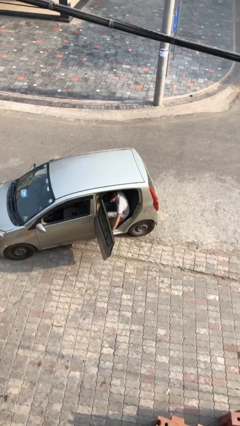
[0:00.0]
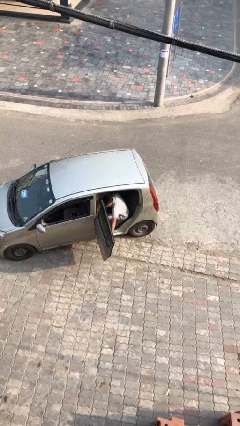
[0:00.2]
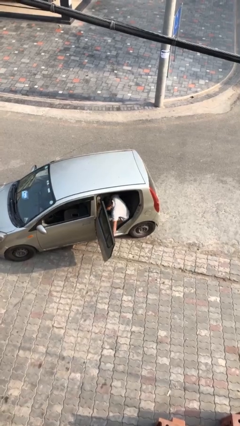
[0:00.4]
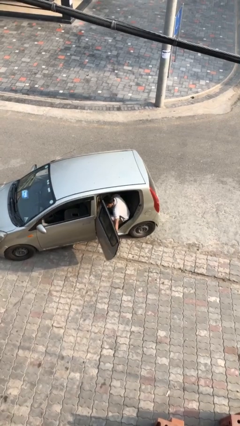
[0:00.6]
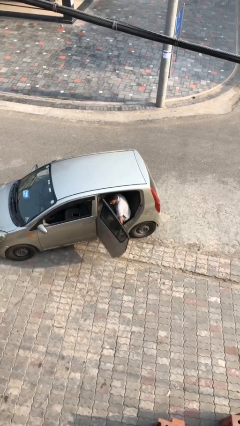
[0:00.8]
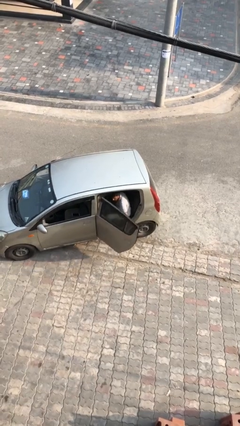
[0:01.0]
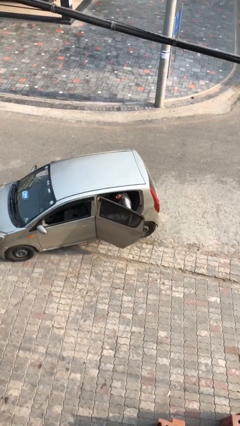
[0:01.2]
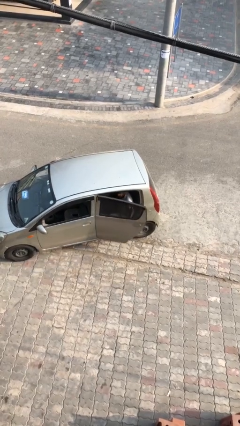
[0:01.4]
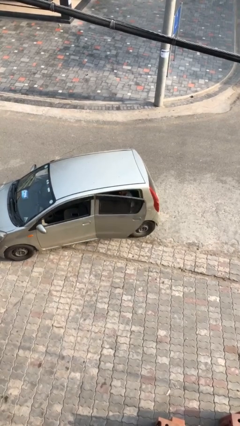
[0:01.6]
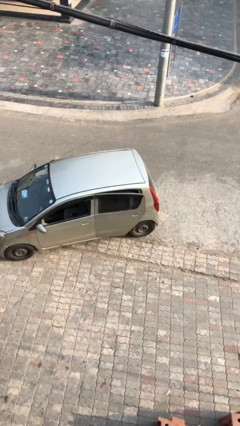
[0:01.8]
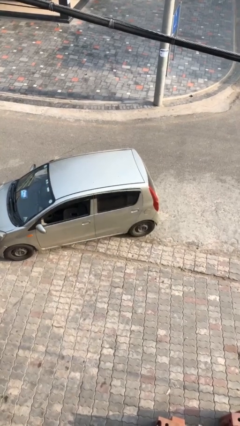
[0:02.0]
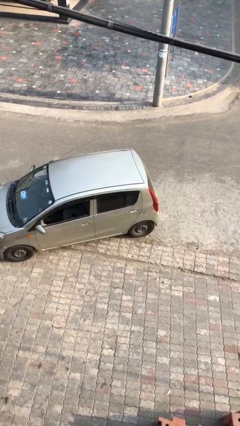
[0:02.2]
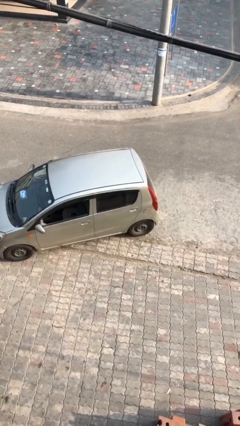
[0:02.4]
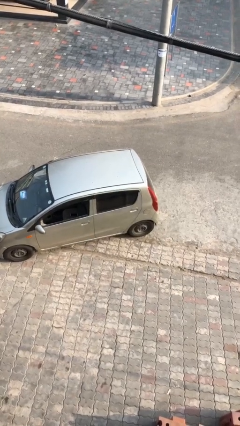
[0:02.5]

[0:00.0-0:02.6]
person closes car door

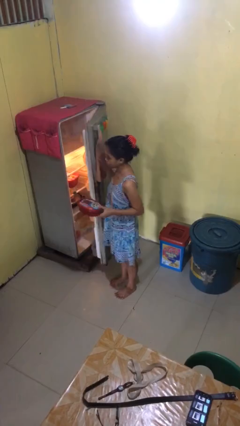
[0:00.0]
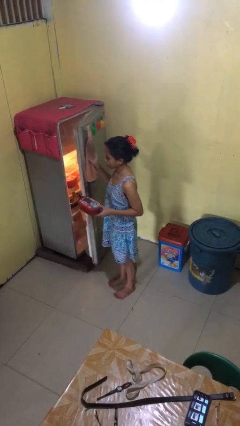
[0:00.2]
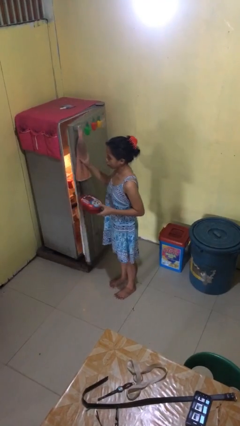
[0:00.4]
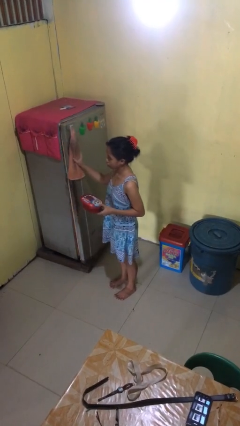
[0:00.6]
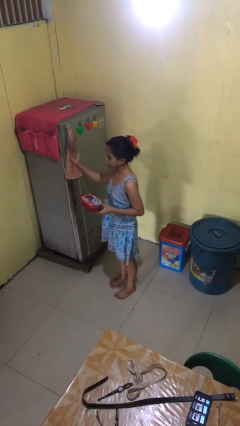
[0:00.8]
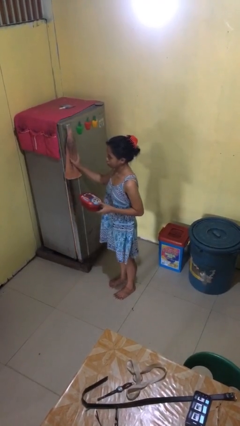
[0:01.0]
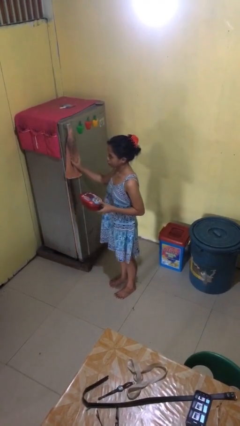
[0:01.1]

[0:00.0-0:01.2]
person closes refrigerator

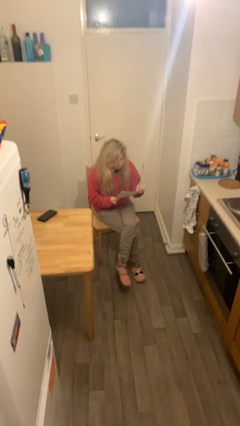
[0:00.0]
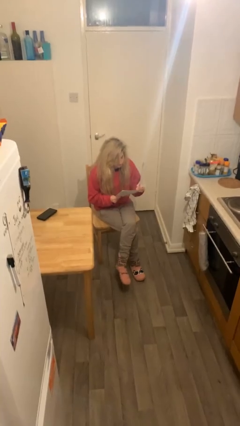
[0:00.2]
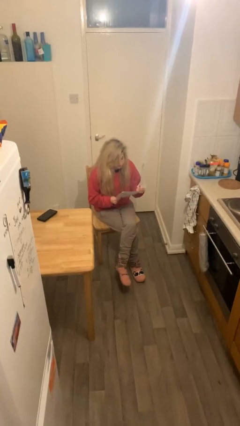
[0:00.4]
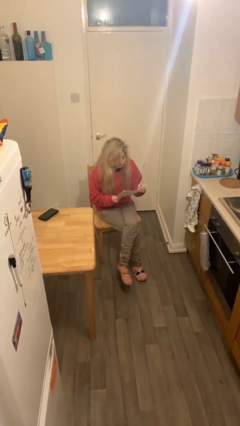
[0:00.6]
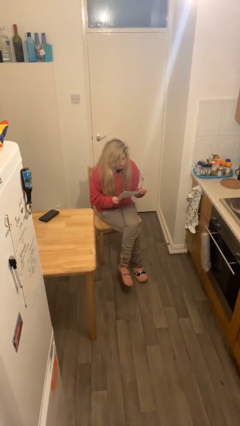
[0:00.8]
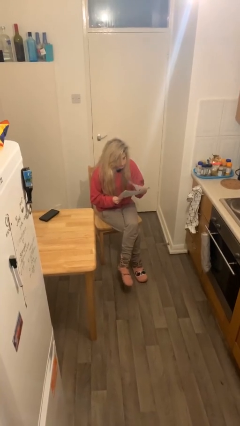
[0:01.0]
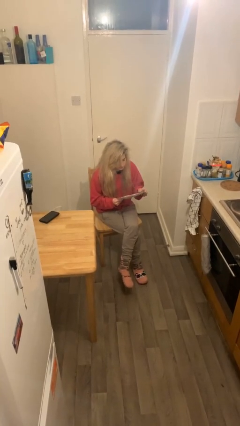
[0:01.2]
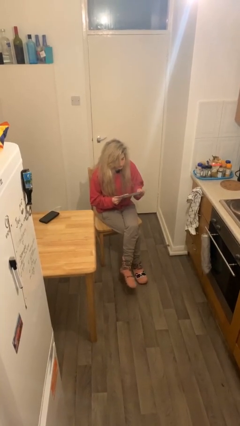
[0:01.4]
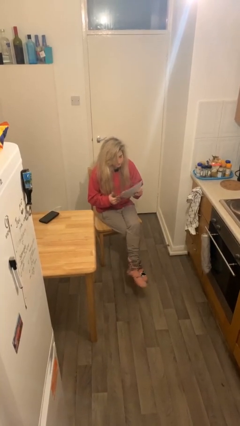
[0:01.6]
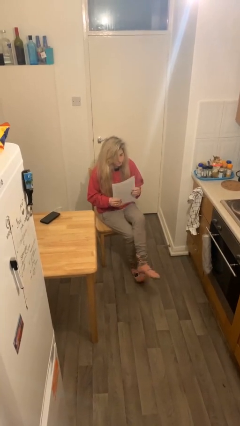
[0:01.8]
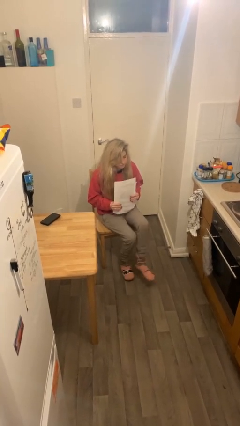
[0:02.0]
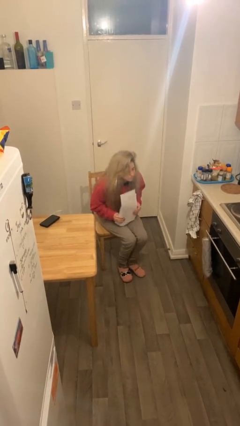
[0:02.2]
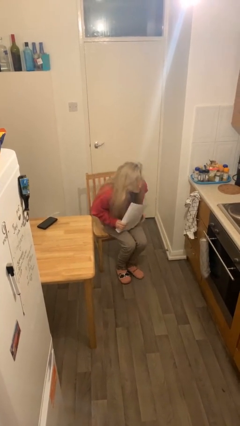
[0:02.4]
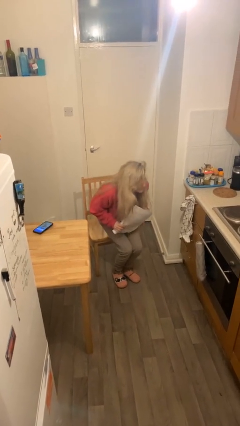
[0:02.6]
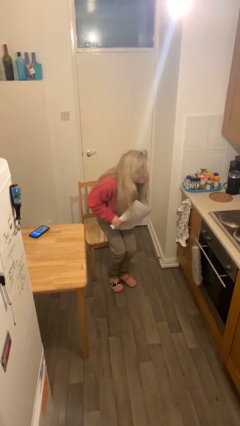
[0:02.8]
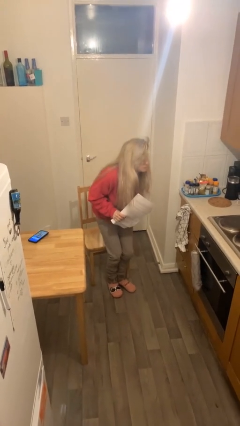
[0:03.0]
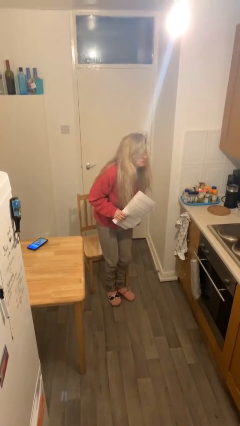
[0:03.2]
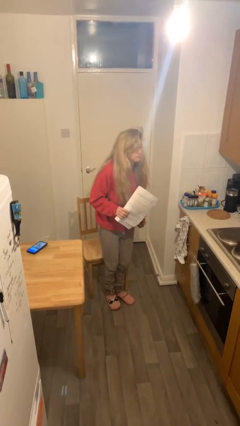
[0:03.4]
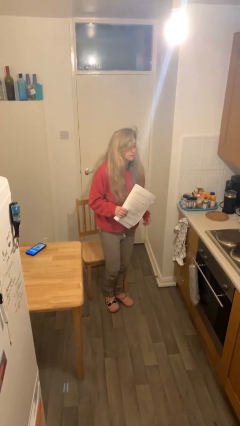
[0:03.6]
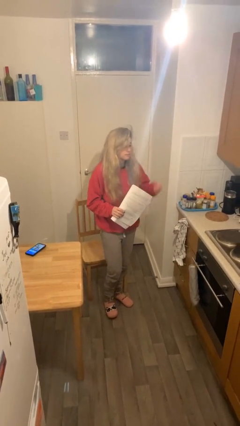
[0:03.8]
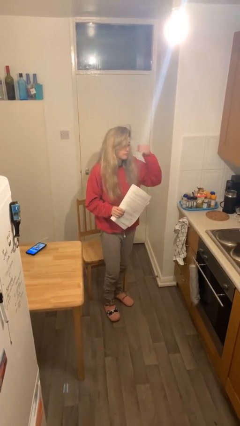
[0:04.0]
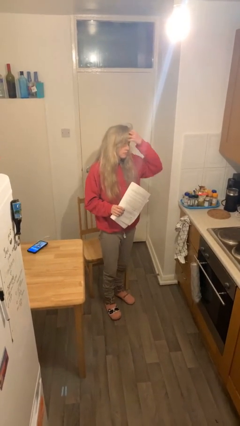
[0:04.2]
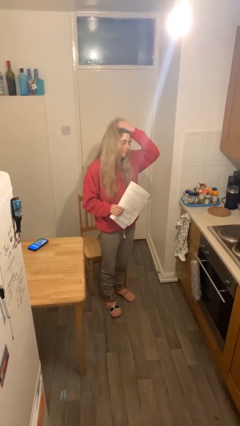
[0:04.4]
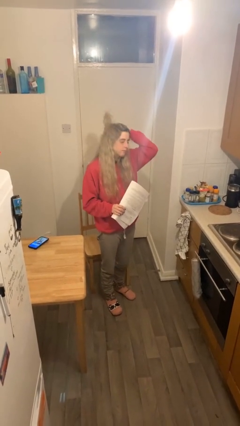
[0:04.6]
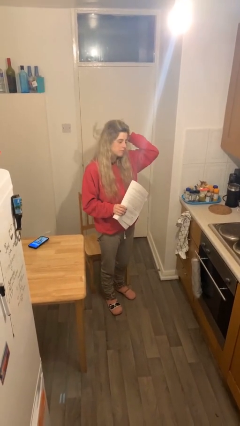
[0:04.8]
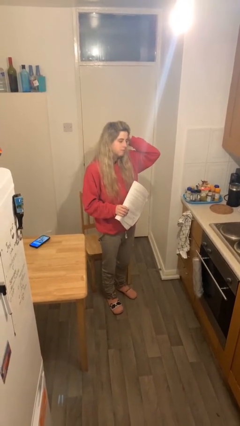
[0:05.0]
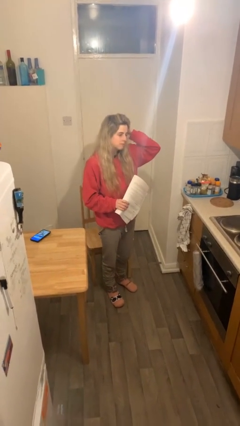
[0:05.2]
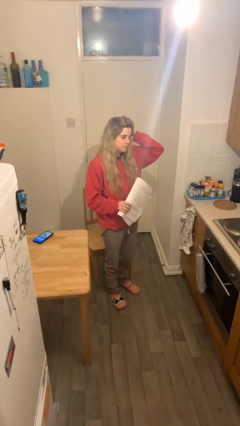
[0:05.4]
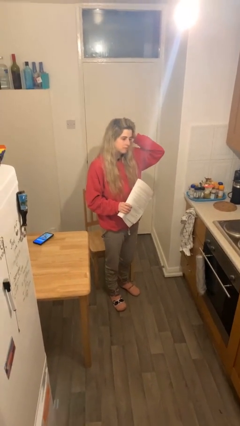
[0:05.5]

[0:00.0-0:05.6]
person stands up

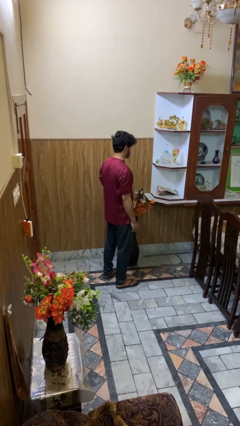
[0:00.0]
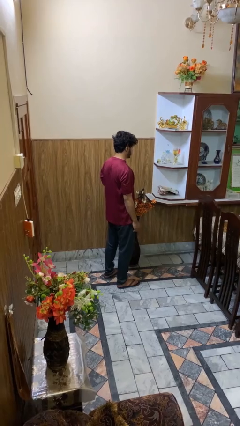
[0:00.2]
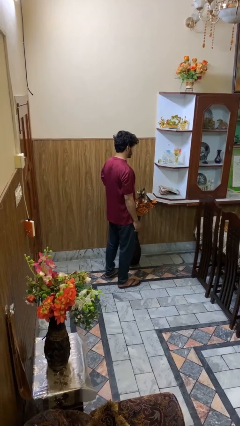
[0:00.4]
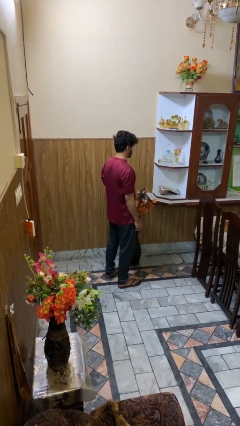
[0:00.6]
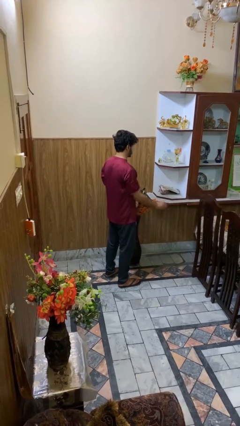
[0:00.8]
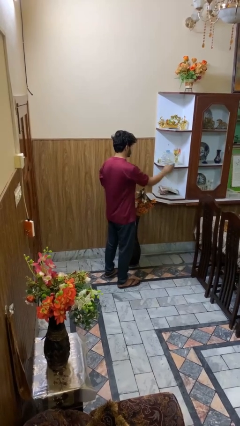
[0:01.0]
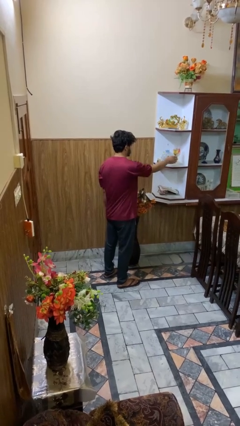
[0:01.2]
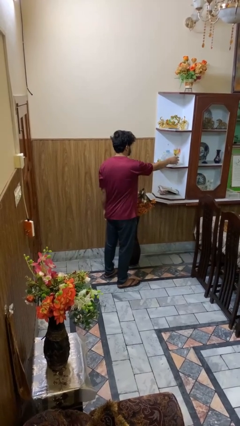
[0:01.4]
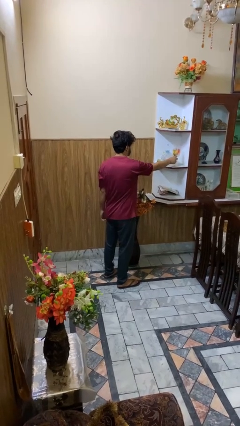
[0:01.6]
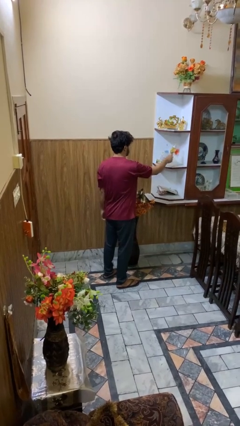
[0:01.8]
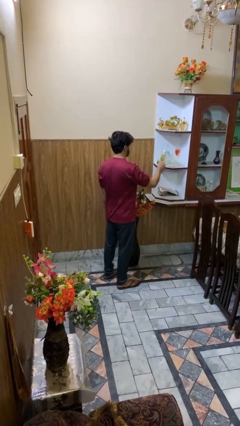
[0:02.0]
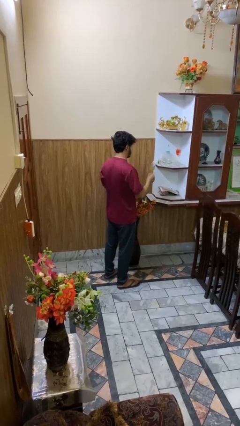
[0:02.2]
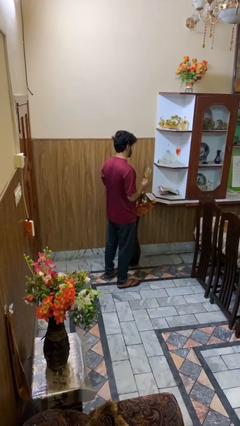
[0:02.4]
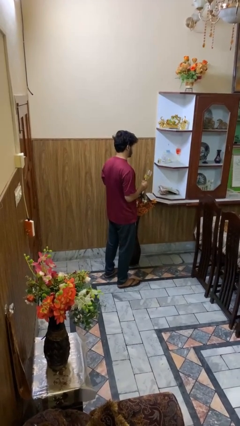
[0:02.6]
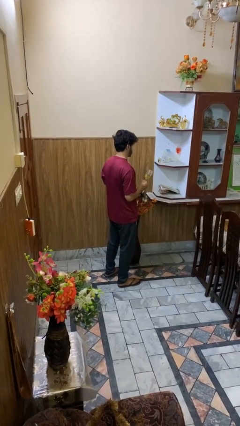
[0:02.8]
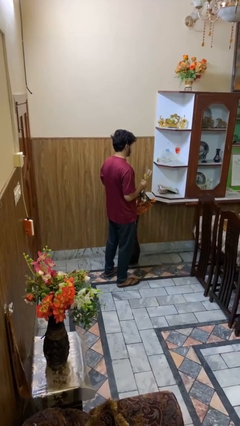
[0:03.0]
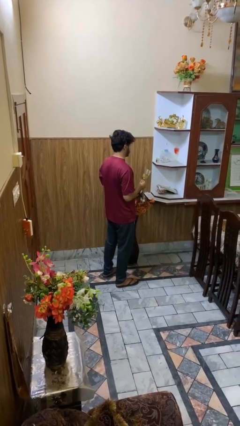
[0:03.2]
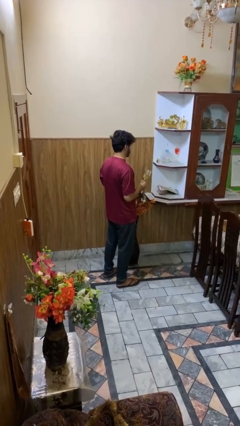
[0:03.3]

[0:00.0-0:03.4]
person picks up object from cabinet

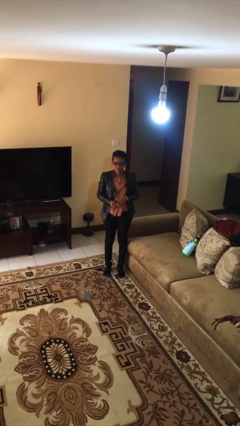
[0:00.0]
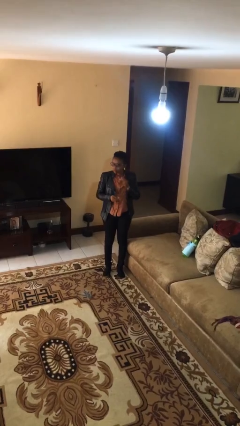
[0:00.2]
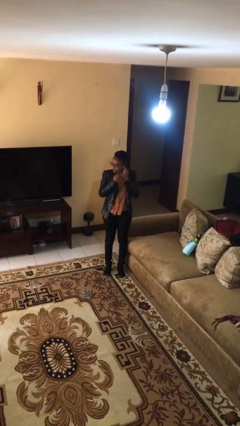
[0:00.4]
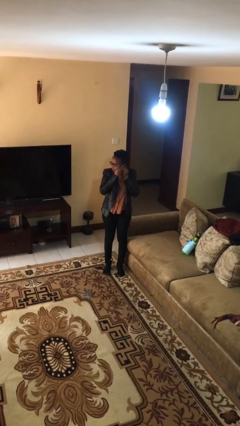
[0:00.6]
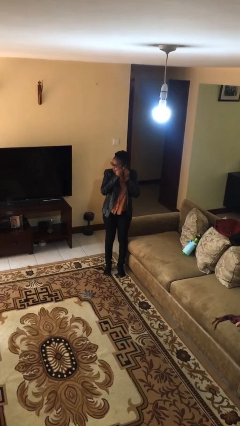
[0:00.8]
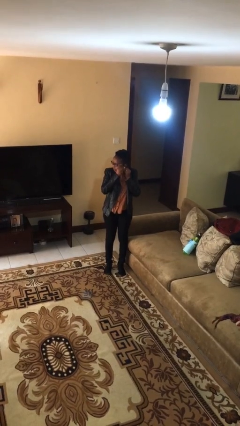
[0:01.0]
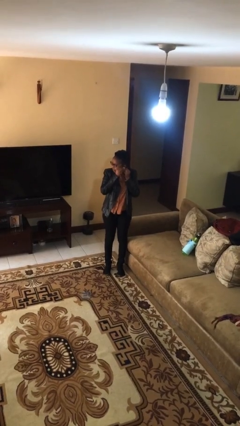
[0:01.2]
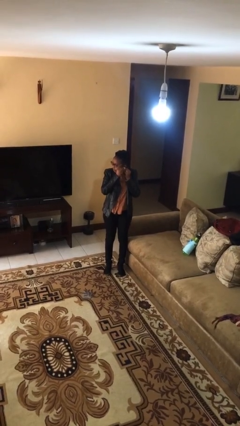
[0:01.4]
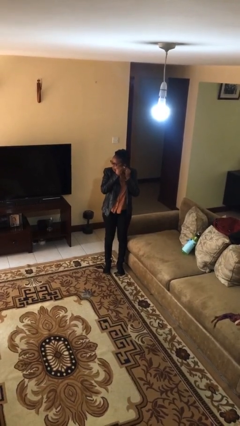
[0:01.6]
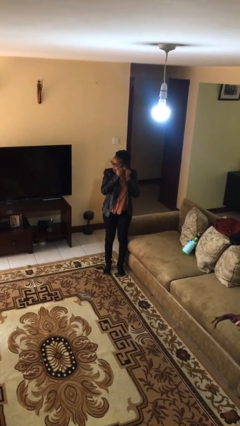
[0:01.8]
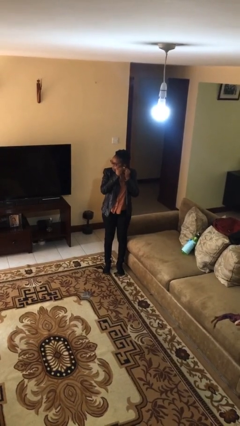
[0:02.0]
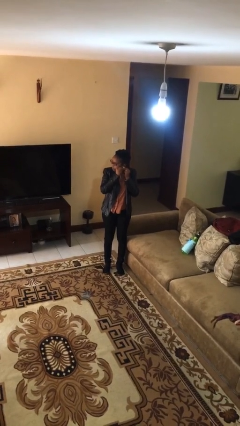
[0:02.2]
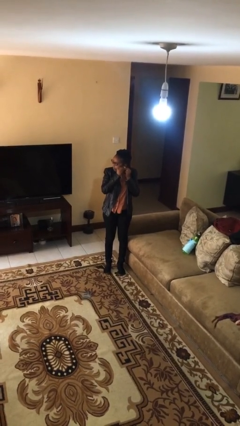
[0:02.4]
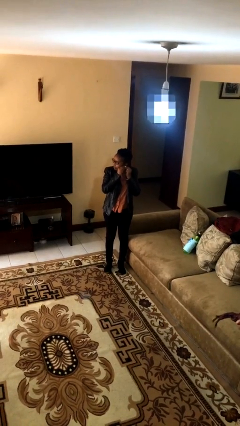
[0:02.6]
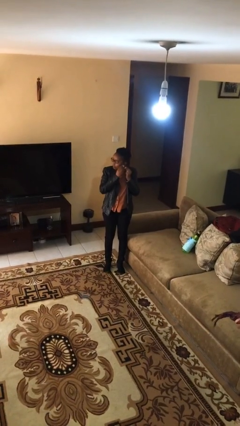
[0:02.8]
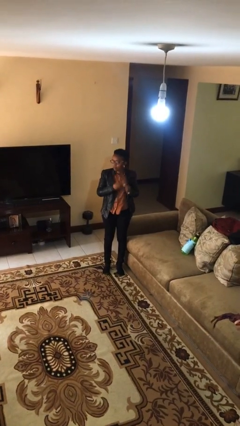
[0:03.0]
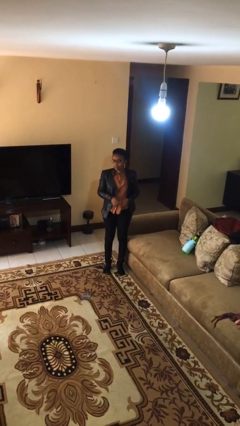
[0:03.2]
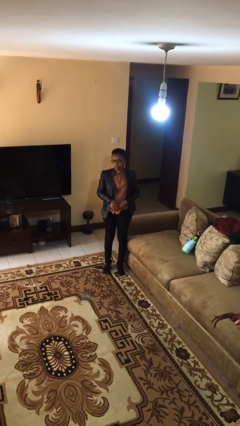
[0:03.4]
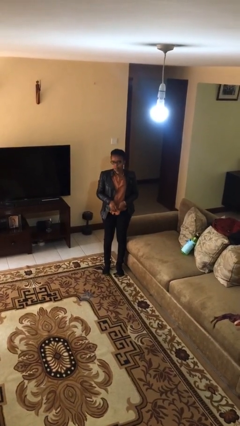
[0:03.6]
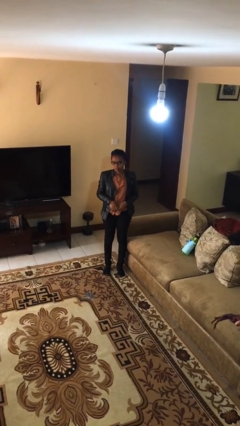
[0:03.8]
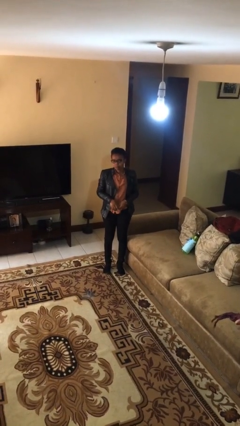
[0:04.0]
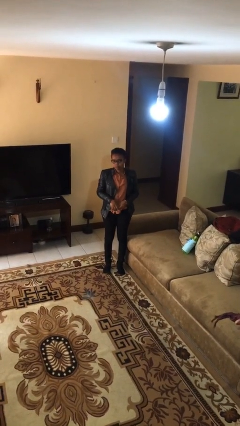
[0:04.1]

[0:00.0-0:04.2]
person puts on earrings

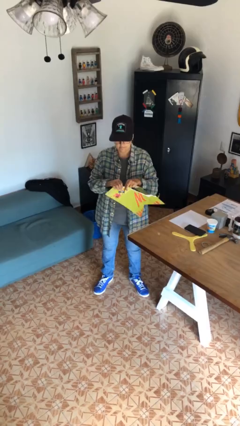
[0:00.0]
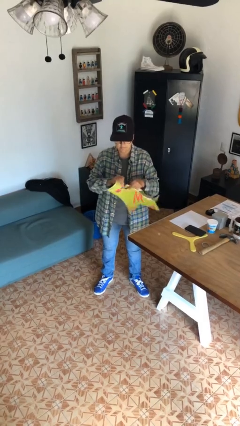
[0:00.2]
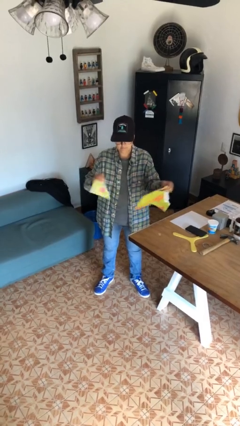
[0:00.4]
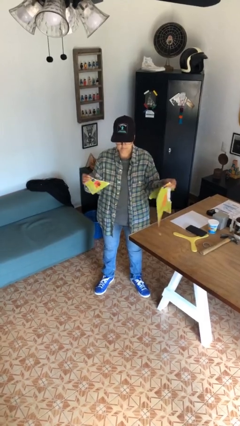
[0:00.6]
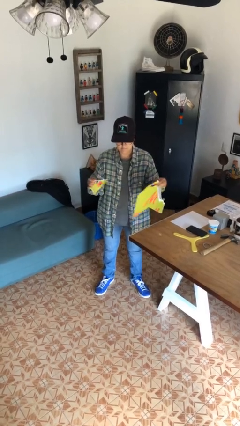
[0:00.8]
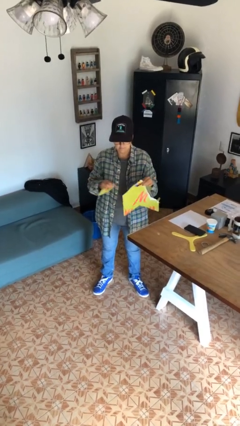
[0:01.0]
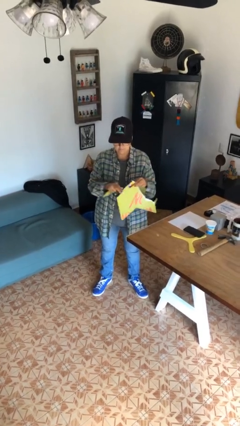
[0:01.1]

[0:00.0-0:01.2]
person tears paper
